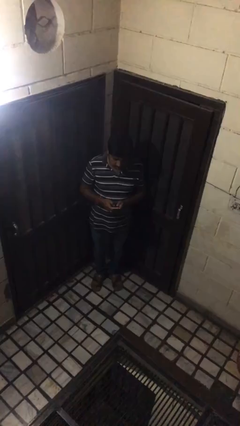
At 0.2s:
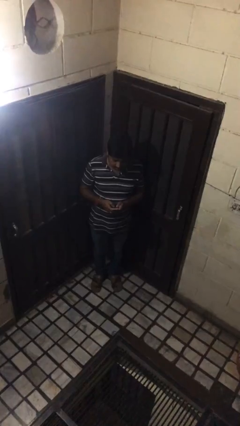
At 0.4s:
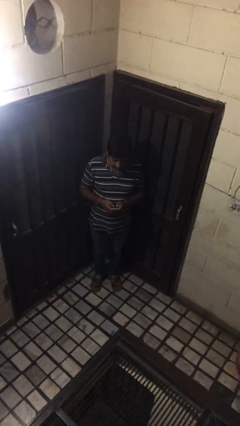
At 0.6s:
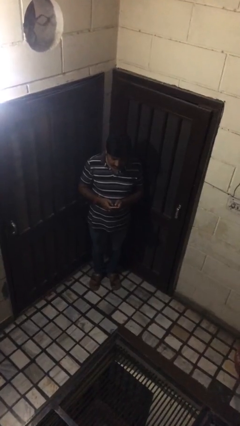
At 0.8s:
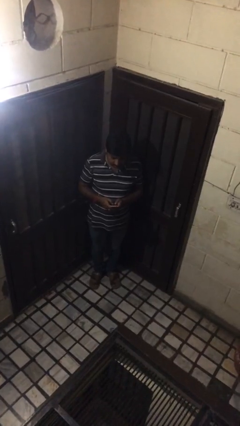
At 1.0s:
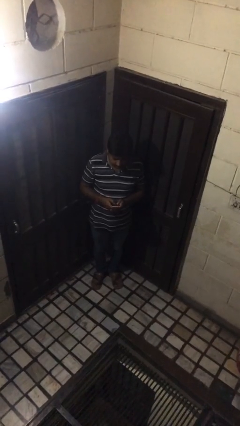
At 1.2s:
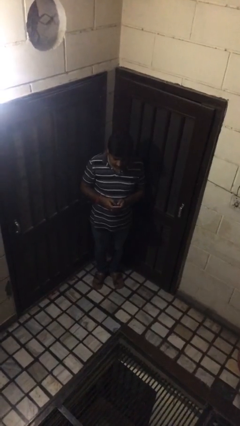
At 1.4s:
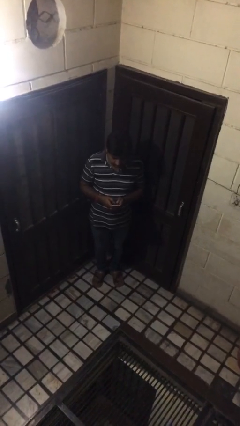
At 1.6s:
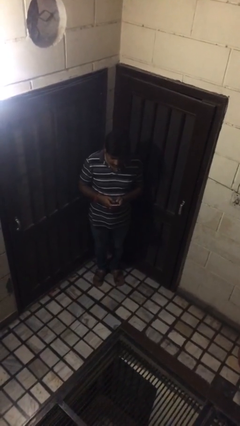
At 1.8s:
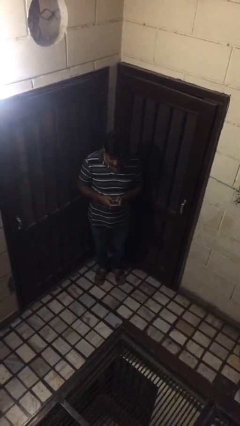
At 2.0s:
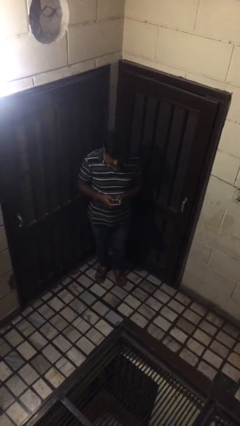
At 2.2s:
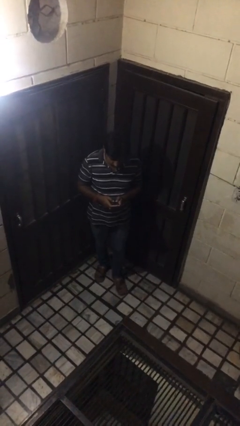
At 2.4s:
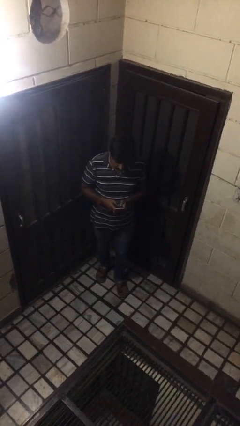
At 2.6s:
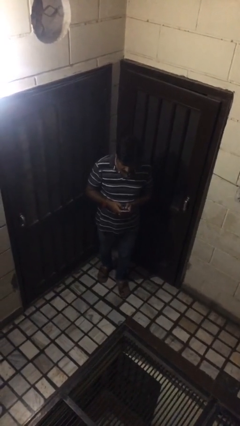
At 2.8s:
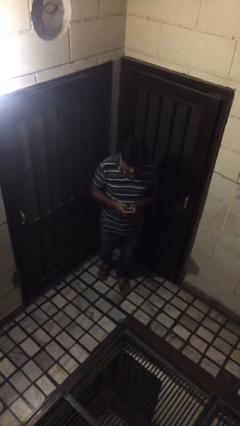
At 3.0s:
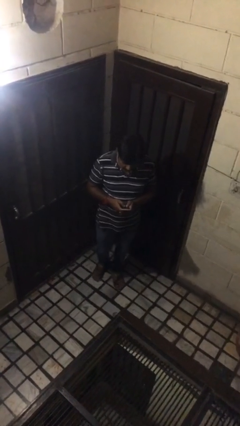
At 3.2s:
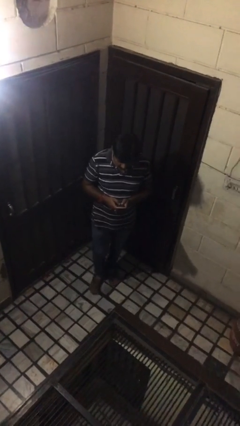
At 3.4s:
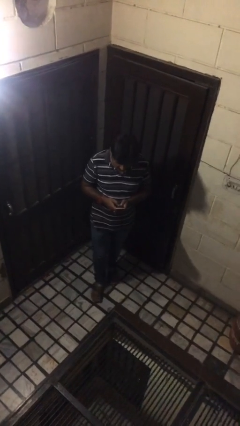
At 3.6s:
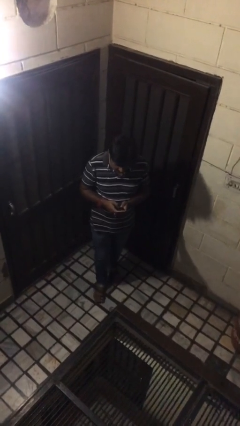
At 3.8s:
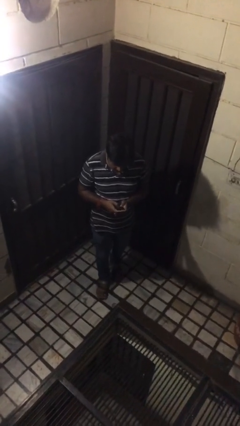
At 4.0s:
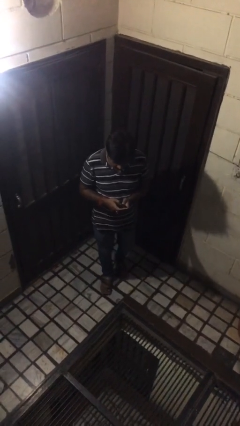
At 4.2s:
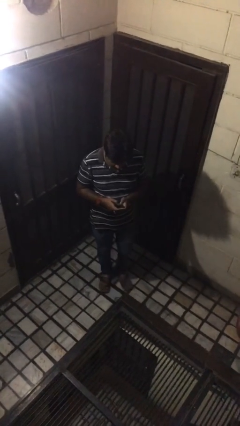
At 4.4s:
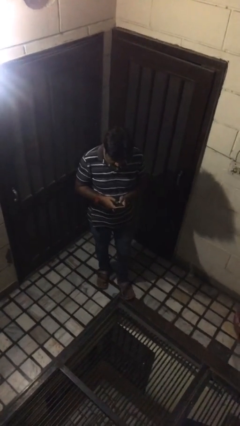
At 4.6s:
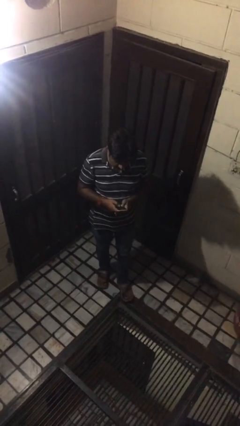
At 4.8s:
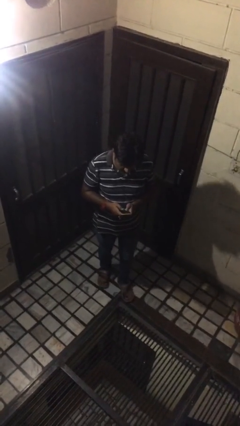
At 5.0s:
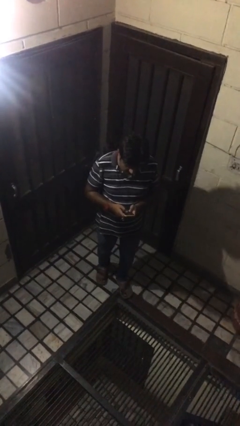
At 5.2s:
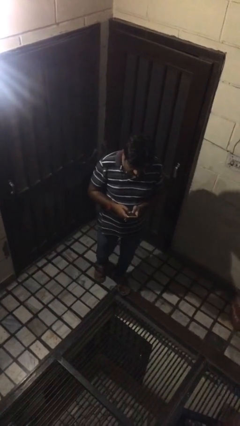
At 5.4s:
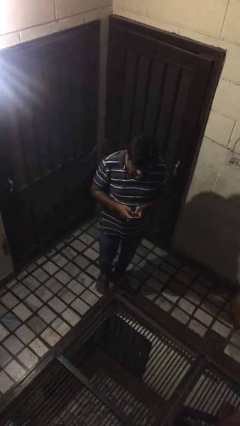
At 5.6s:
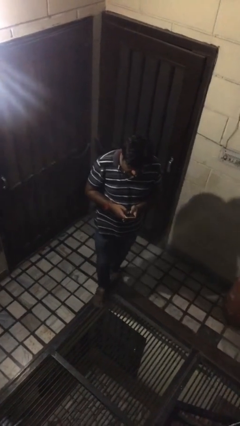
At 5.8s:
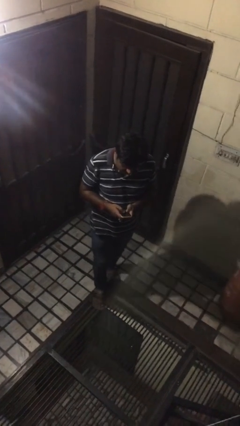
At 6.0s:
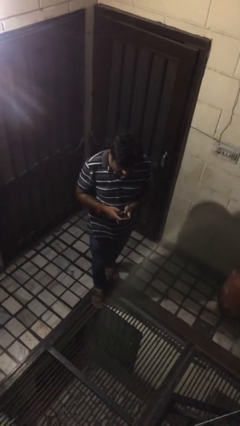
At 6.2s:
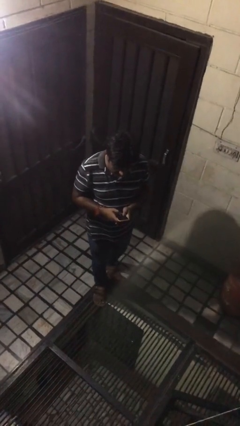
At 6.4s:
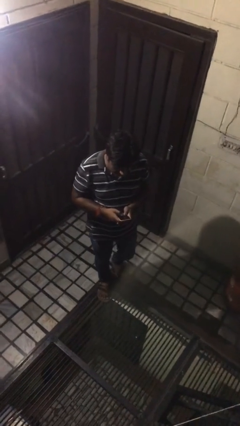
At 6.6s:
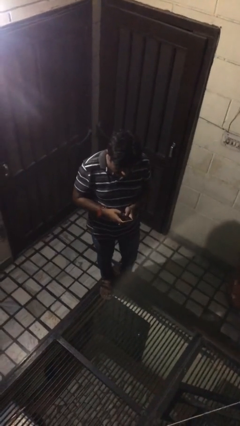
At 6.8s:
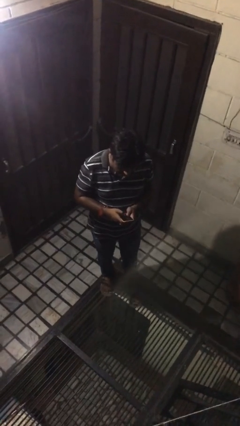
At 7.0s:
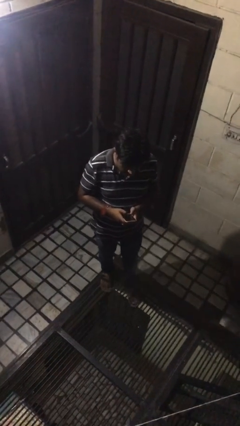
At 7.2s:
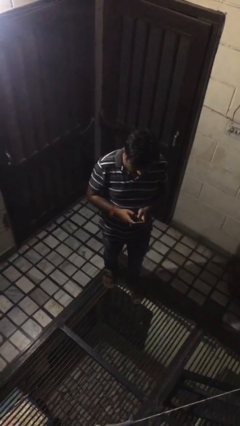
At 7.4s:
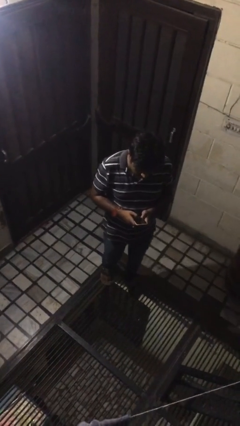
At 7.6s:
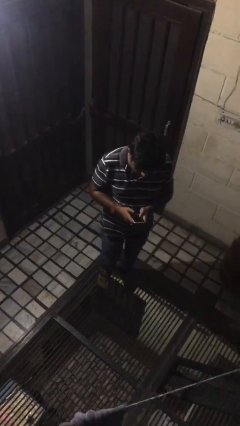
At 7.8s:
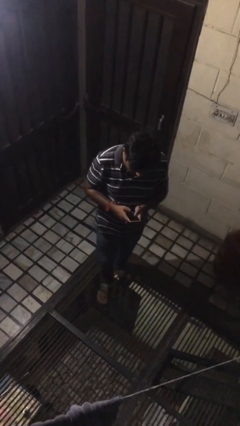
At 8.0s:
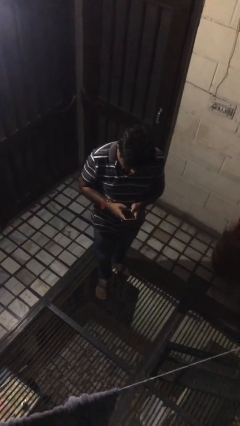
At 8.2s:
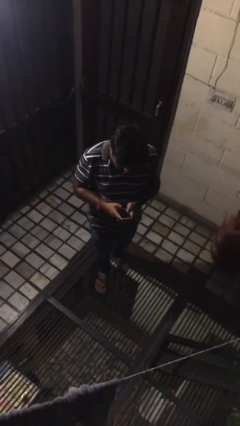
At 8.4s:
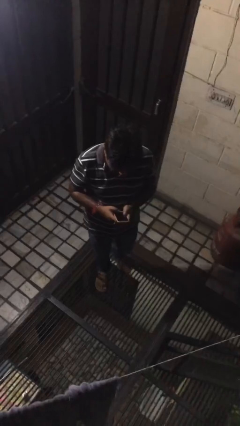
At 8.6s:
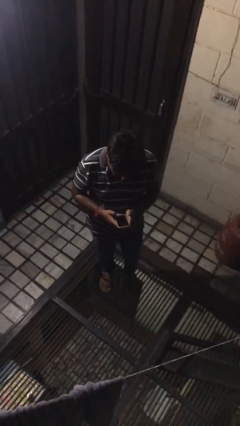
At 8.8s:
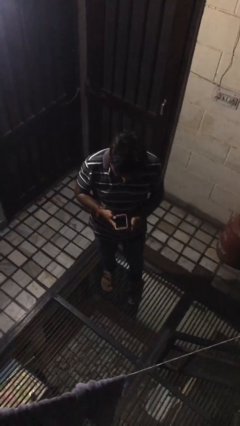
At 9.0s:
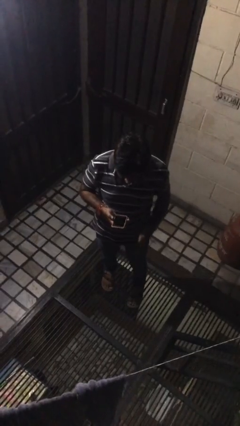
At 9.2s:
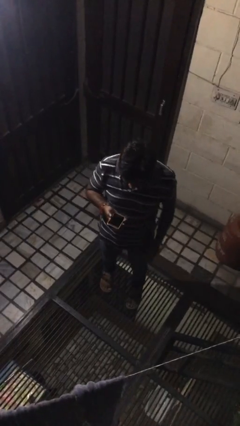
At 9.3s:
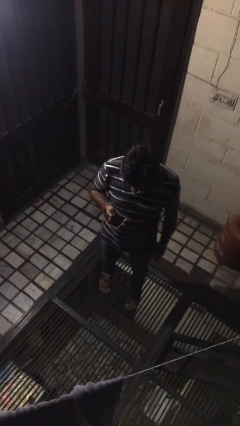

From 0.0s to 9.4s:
person texts on phone

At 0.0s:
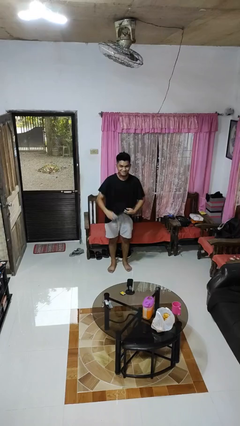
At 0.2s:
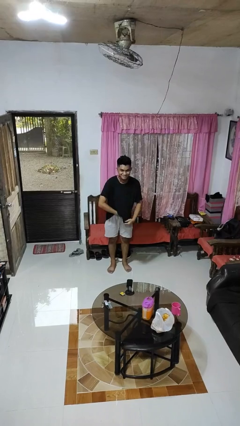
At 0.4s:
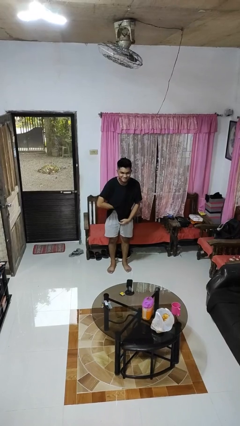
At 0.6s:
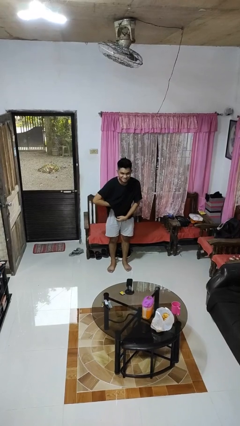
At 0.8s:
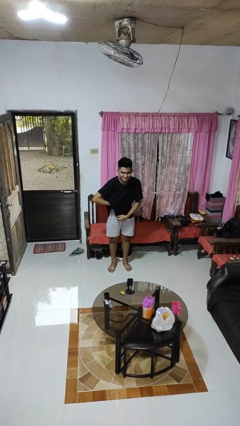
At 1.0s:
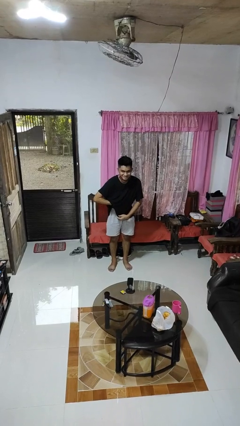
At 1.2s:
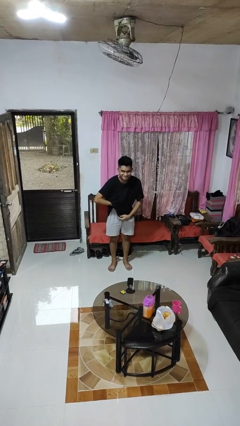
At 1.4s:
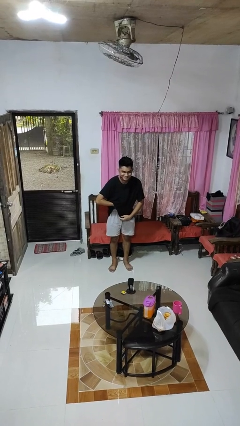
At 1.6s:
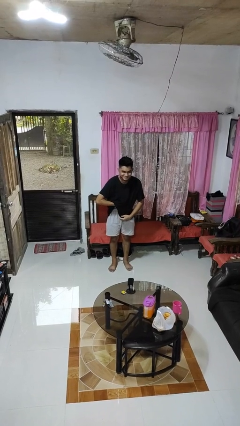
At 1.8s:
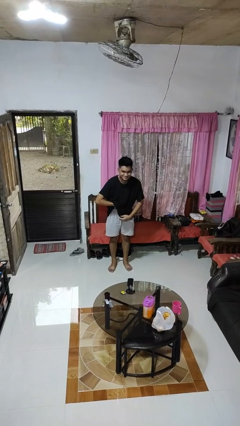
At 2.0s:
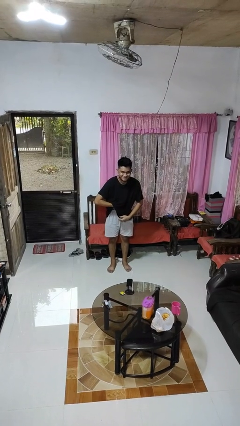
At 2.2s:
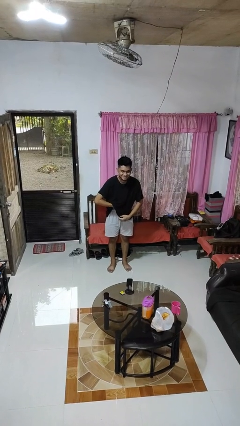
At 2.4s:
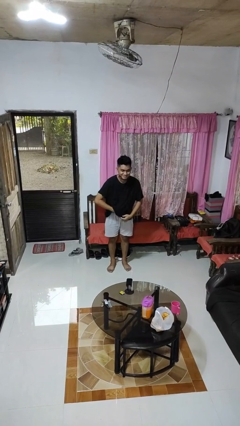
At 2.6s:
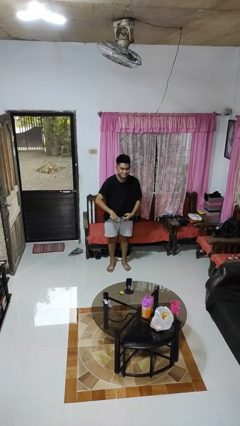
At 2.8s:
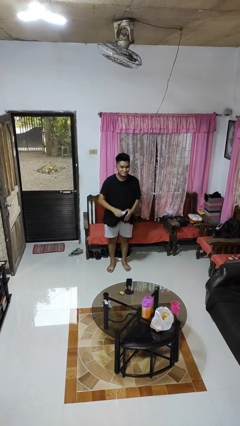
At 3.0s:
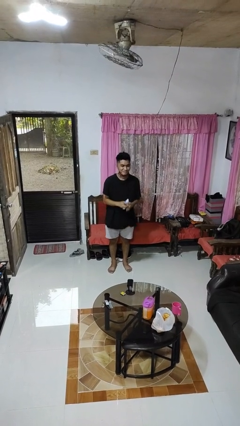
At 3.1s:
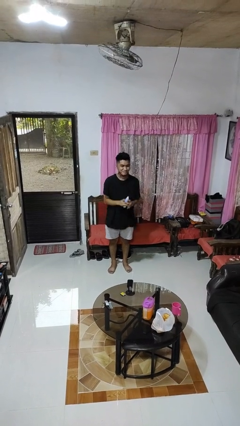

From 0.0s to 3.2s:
person applies deodorant

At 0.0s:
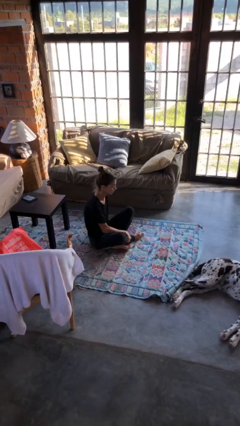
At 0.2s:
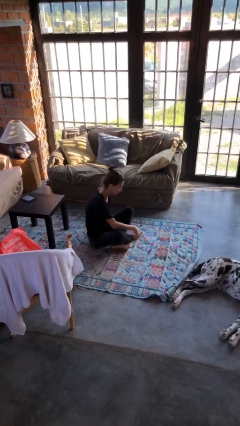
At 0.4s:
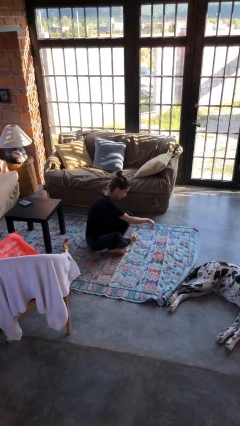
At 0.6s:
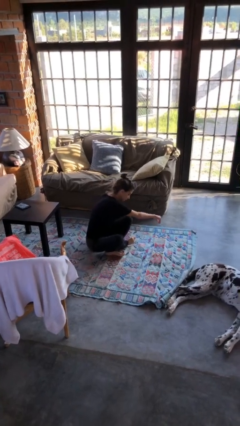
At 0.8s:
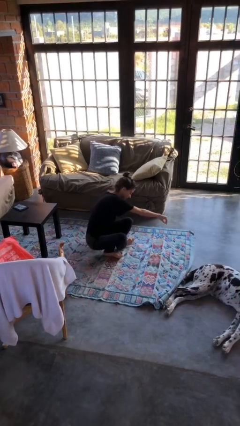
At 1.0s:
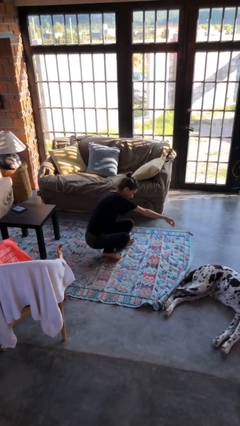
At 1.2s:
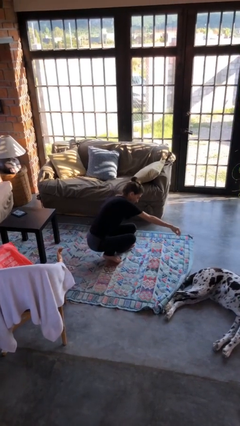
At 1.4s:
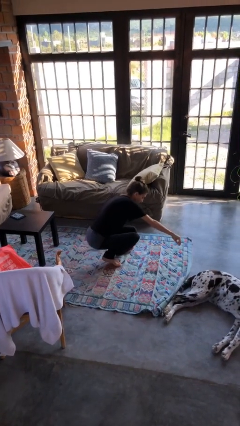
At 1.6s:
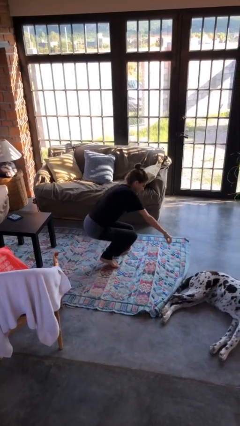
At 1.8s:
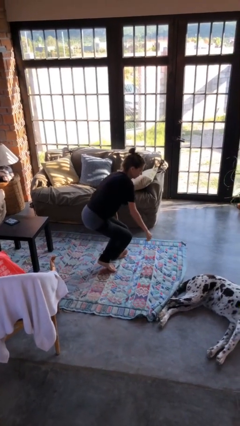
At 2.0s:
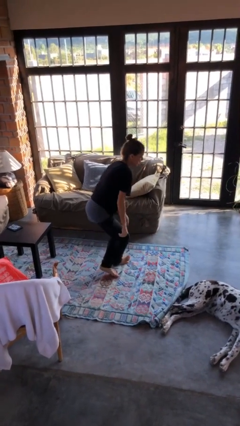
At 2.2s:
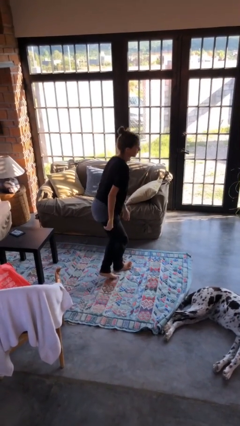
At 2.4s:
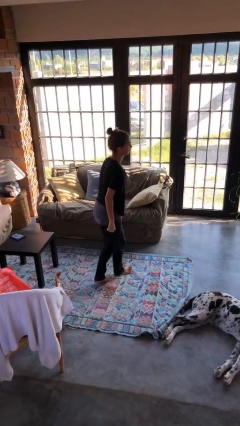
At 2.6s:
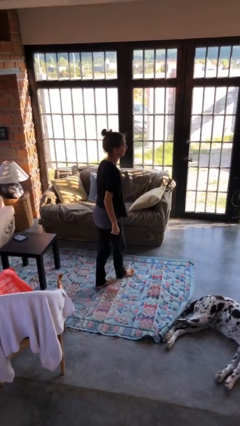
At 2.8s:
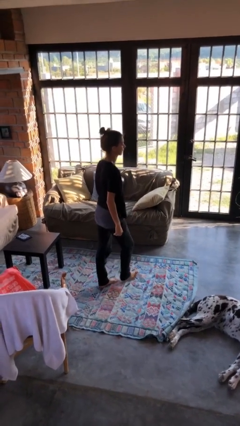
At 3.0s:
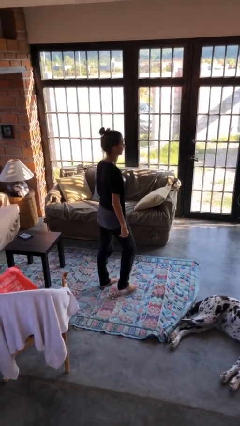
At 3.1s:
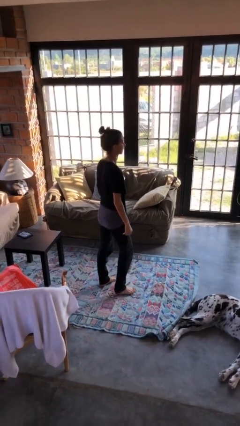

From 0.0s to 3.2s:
person stands up from floor

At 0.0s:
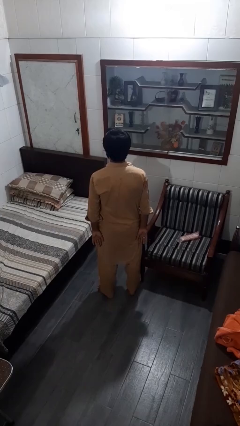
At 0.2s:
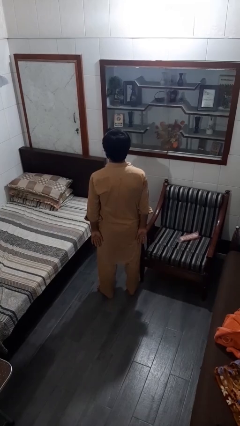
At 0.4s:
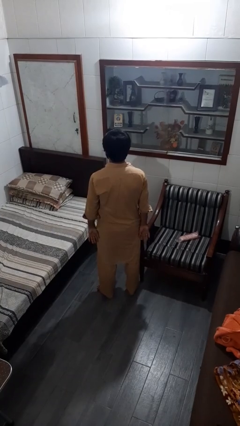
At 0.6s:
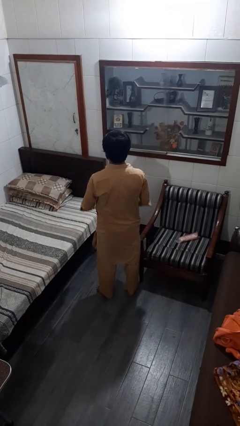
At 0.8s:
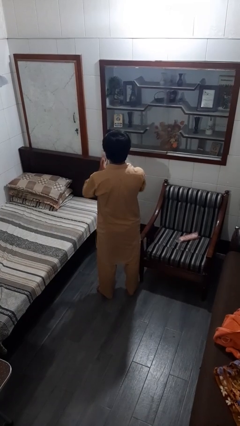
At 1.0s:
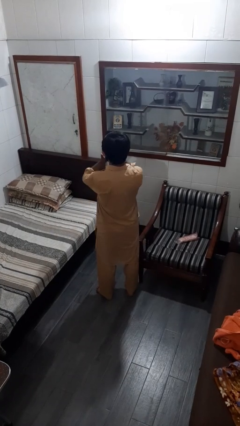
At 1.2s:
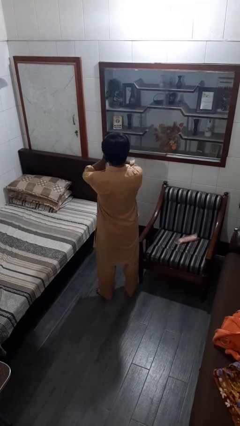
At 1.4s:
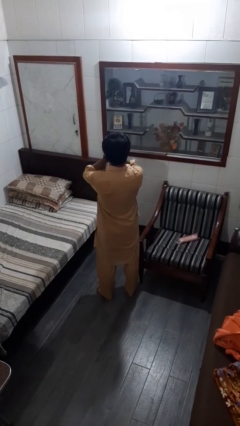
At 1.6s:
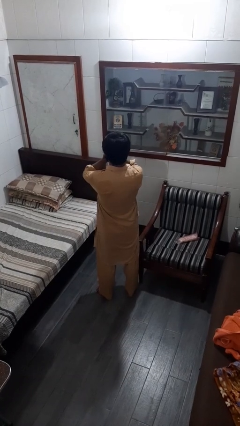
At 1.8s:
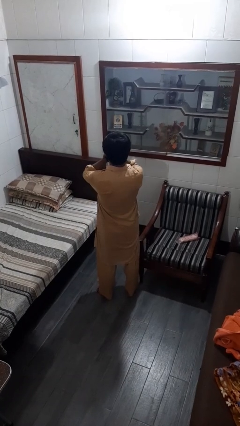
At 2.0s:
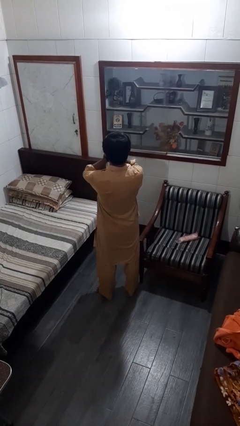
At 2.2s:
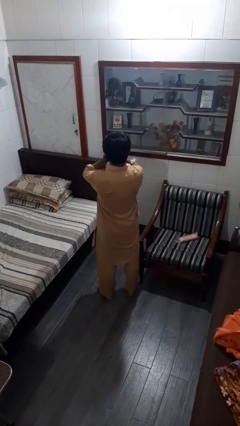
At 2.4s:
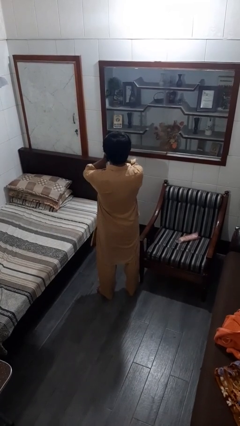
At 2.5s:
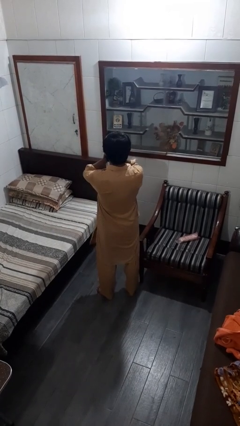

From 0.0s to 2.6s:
person covers face with hands
